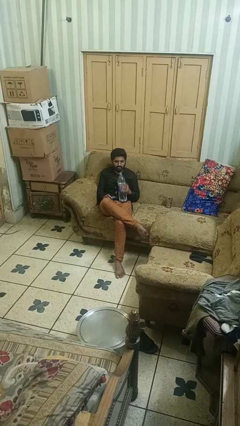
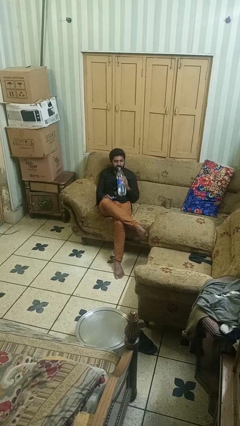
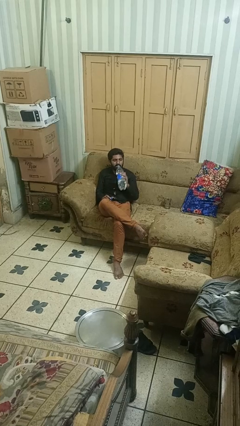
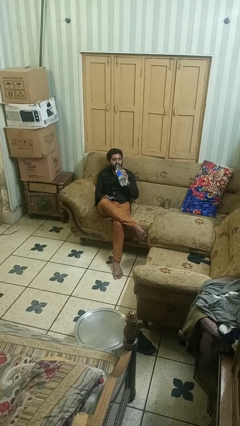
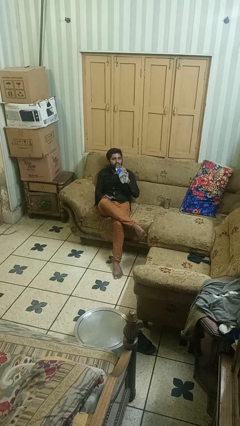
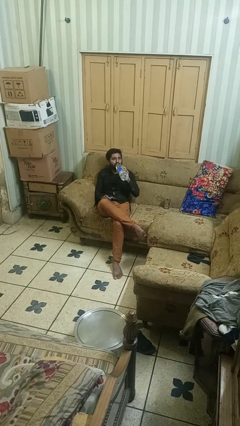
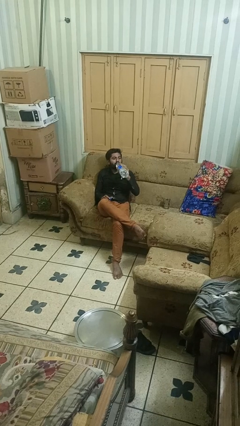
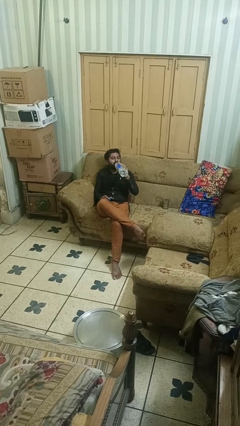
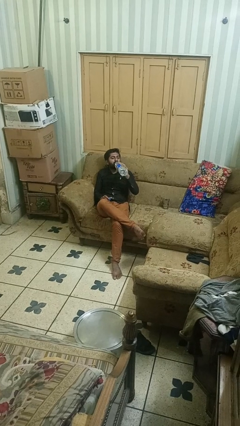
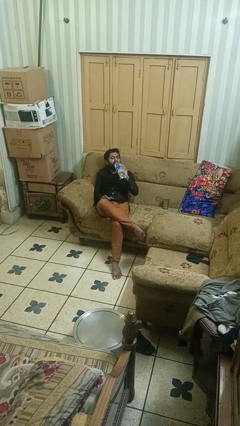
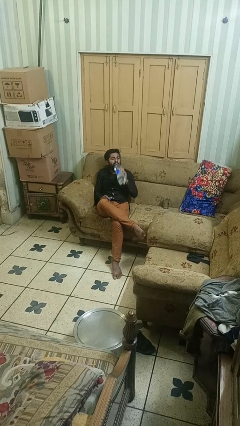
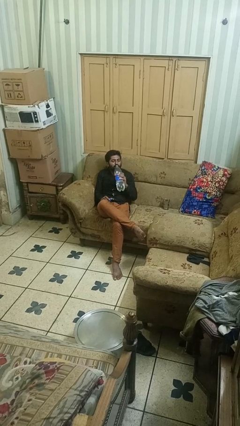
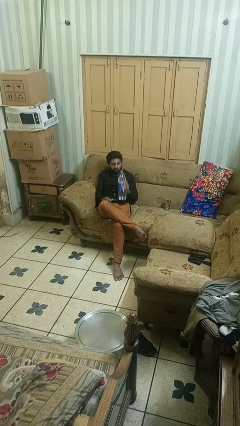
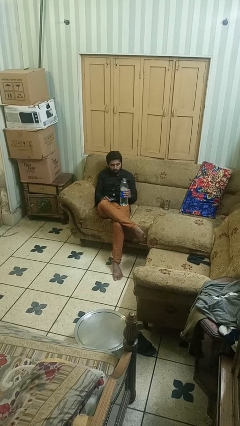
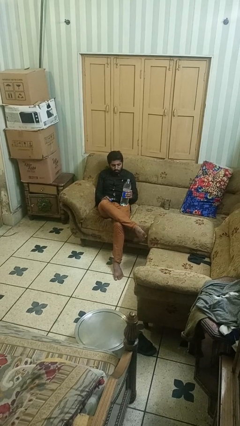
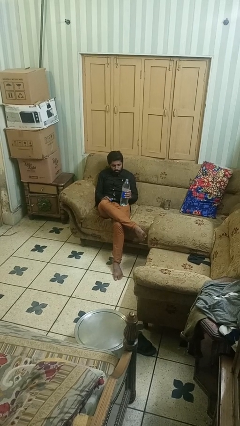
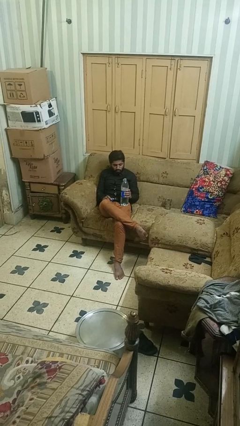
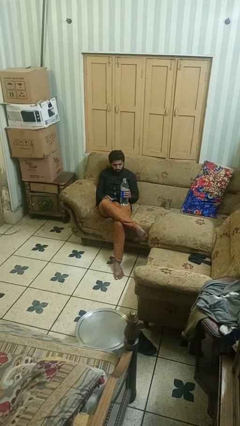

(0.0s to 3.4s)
person drinks from bottle

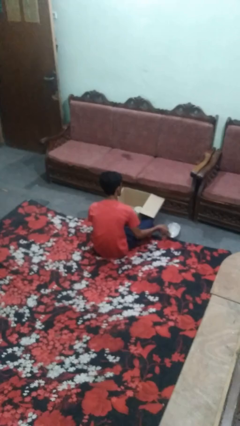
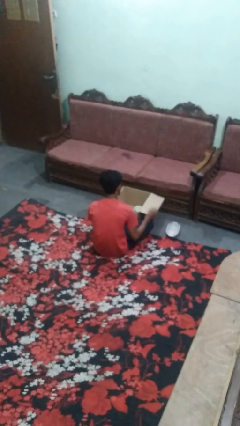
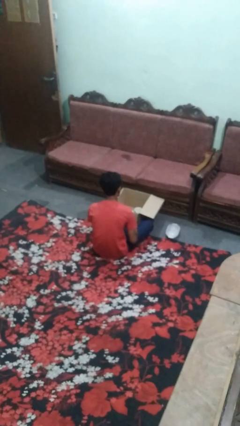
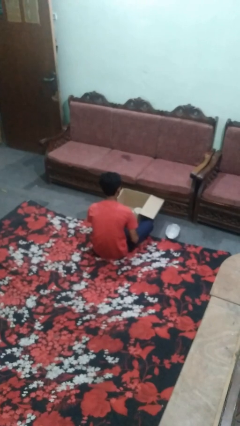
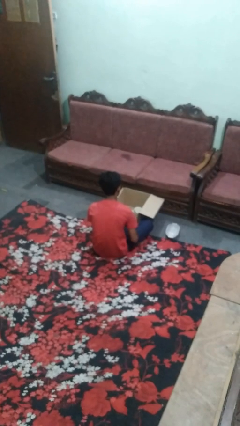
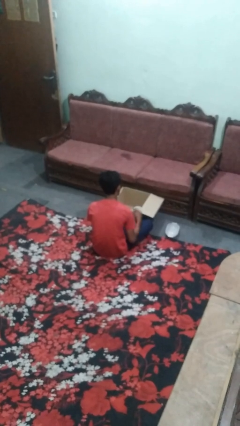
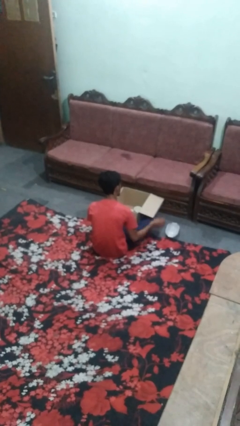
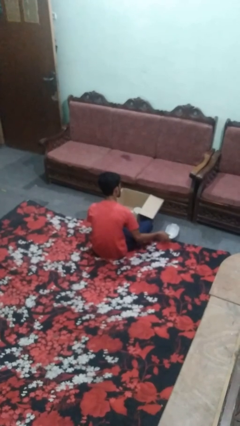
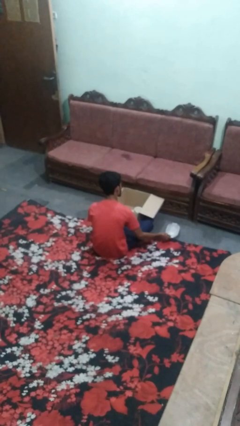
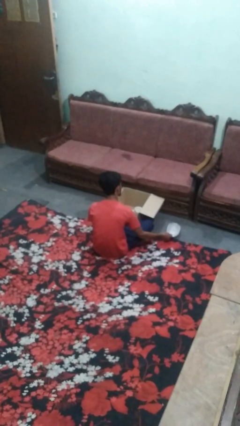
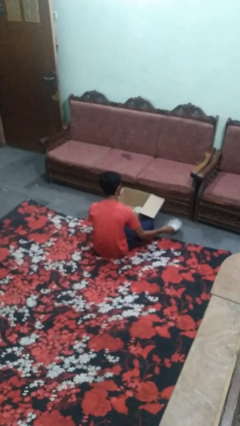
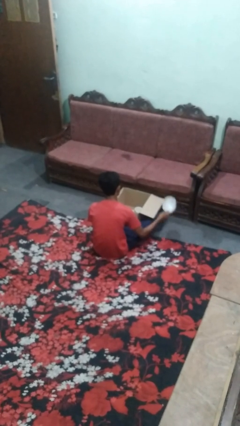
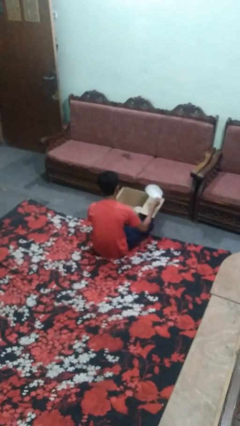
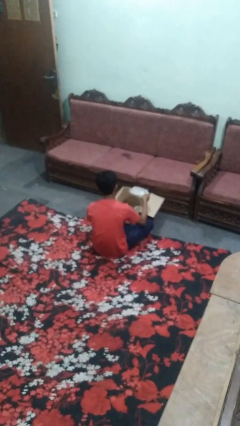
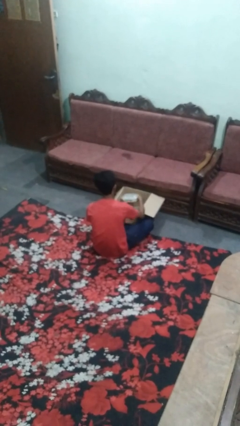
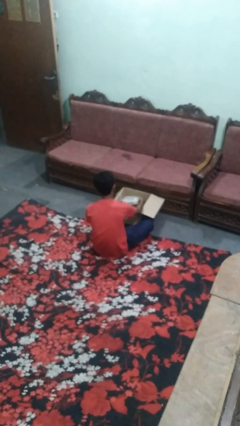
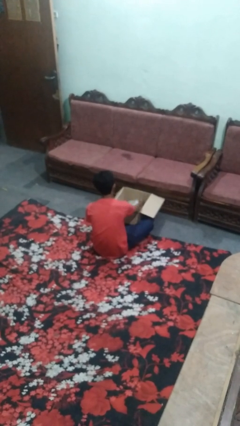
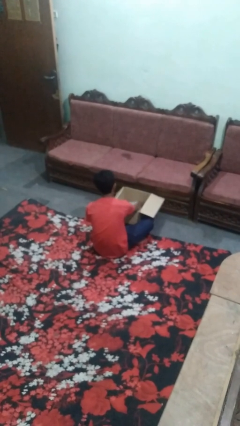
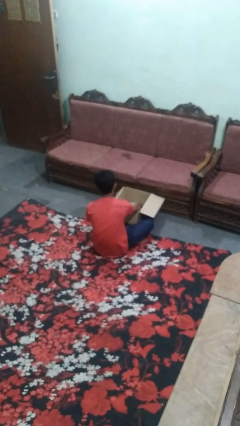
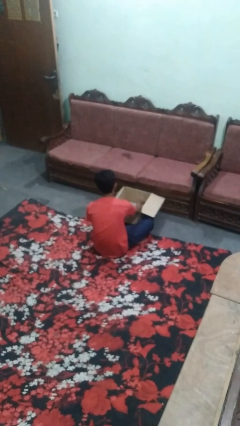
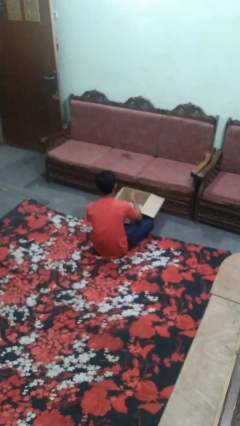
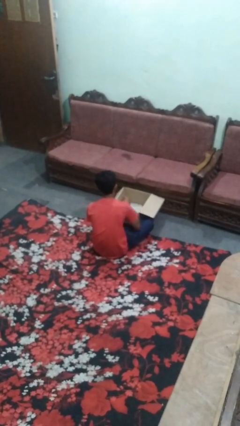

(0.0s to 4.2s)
person puts object into box

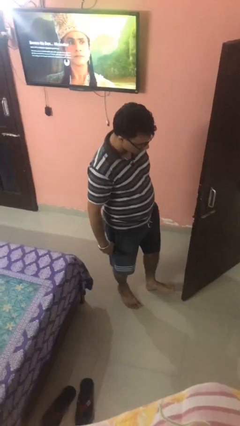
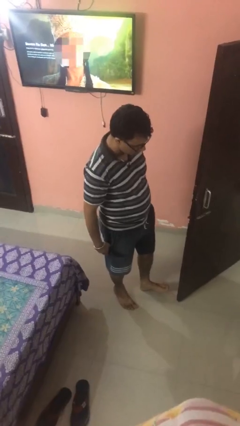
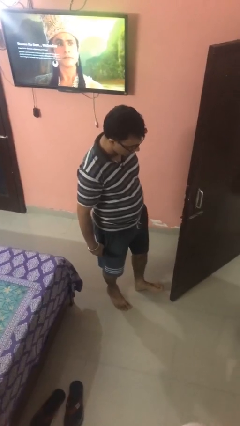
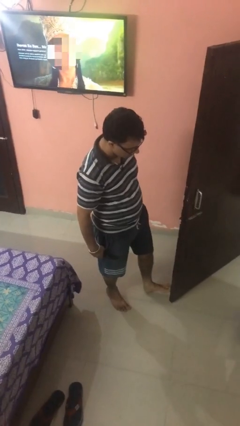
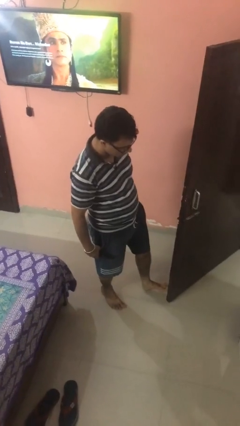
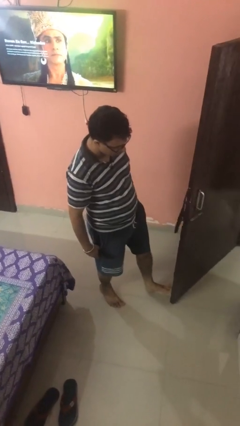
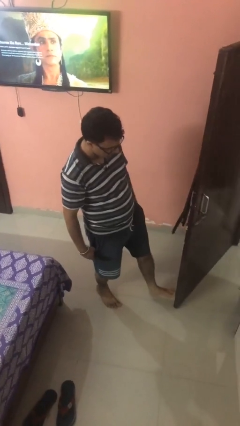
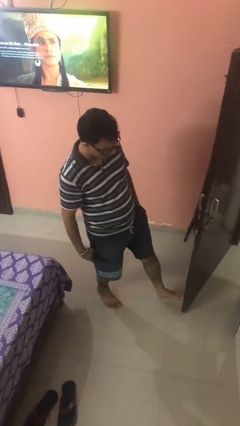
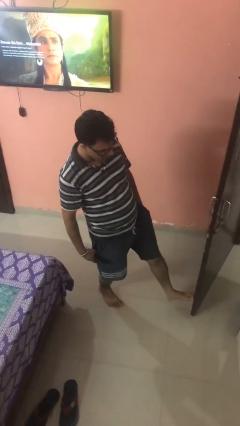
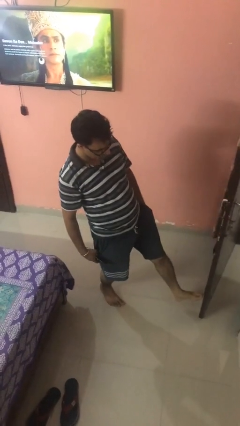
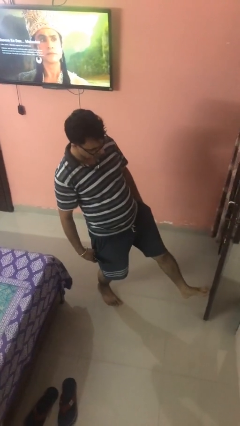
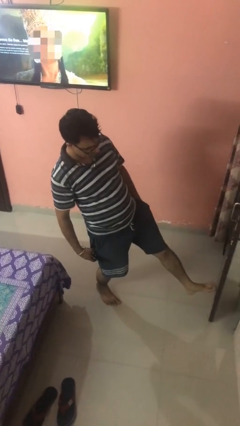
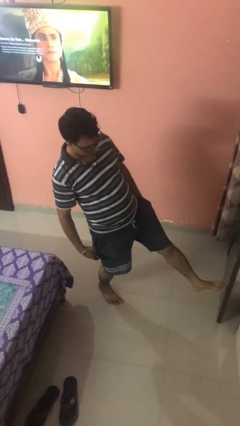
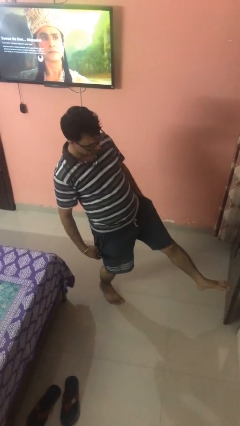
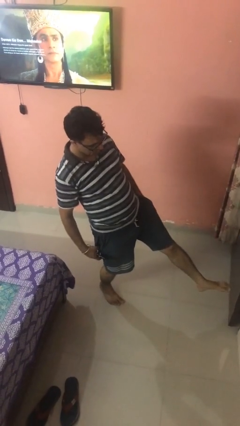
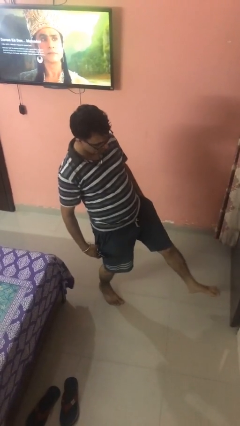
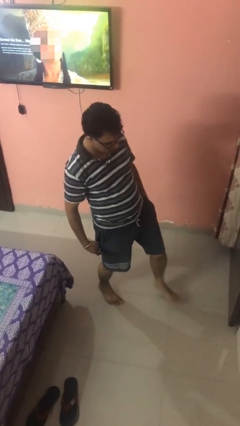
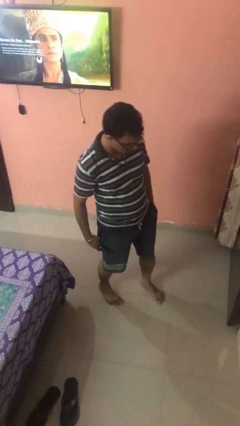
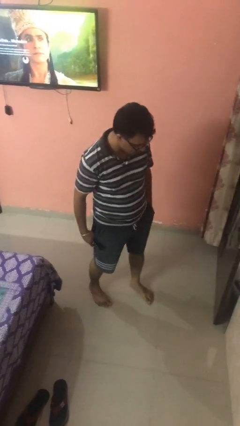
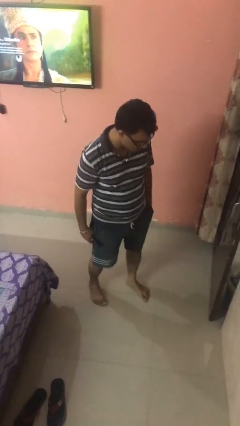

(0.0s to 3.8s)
person closes door with foot

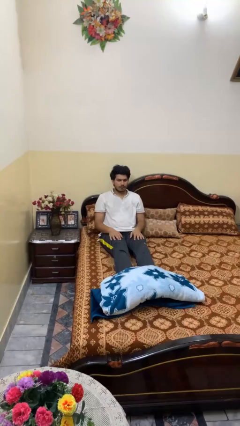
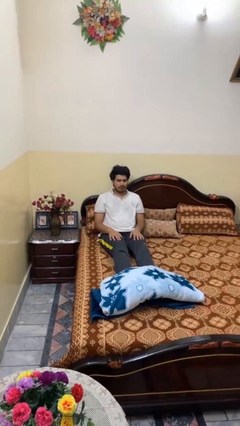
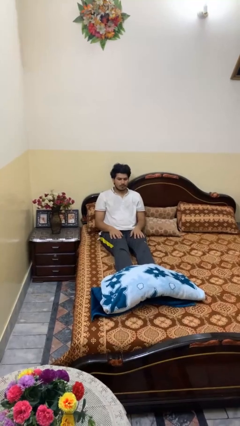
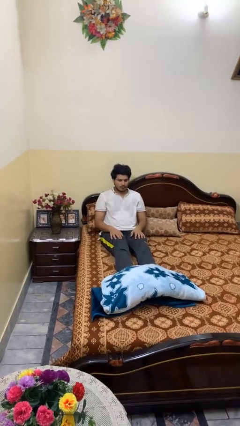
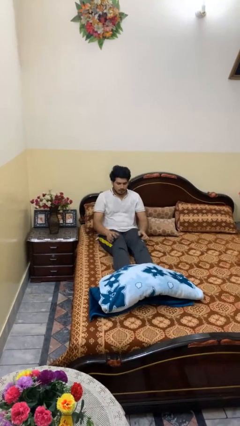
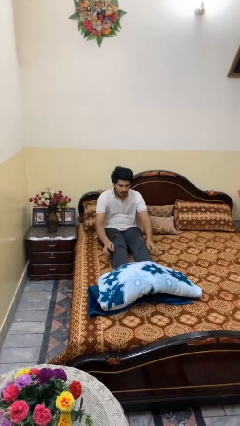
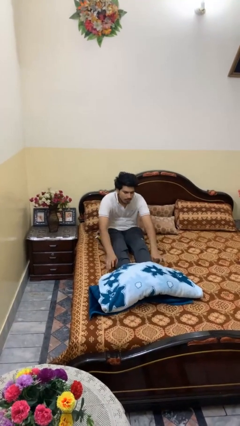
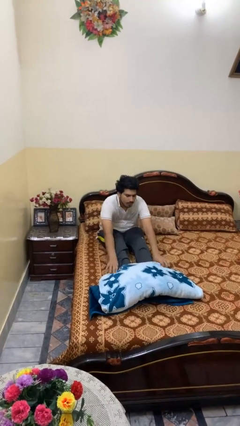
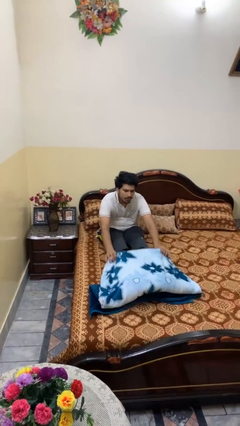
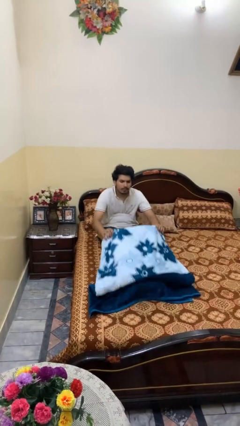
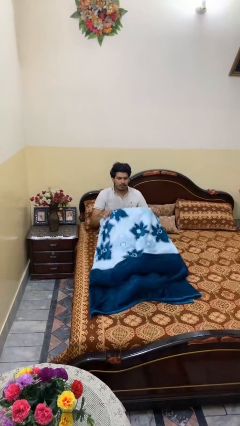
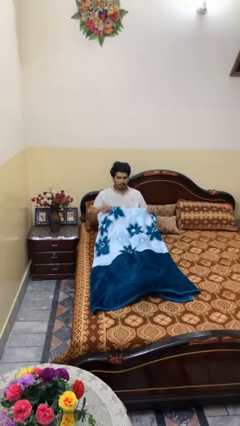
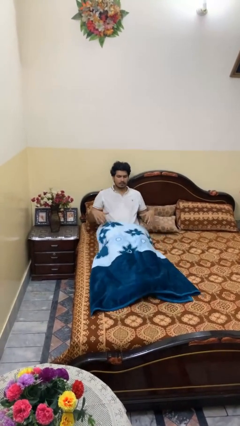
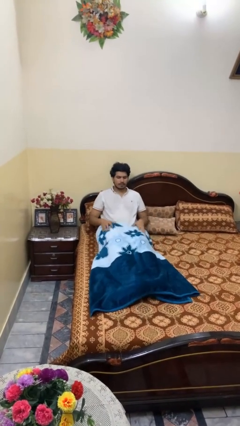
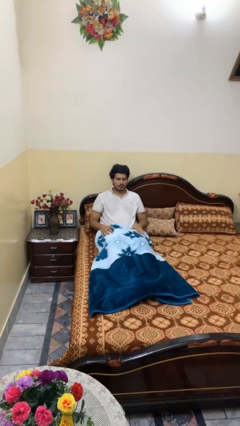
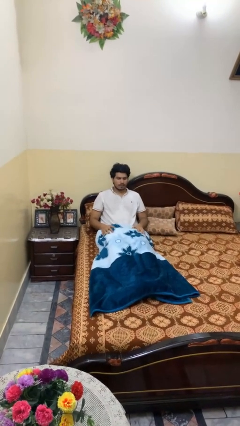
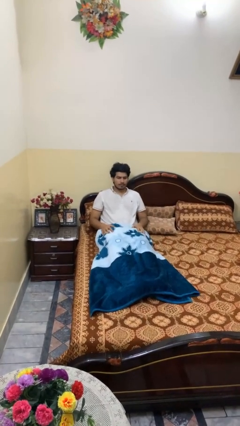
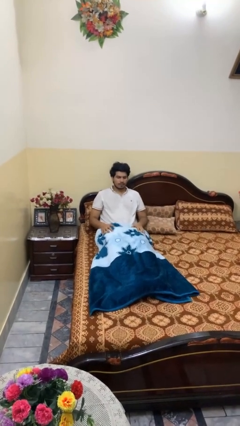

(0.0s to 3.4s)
person covers with blanket

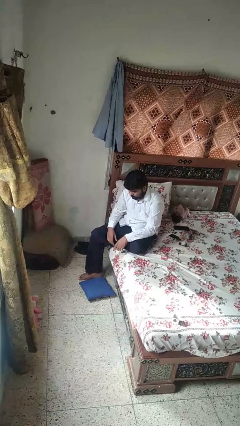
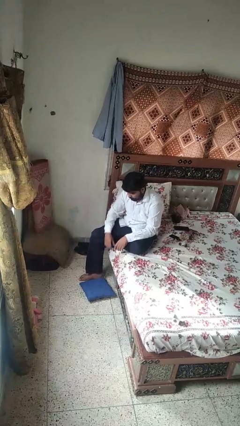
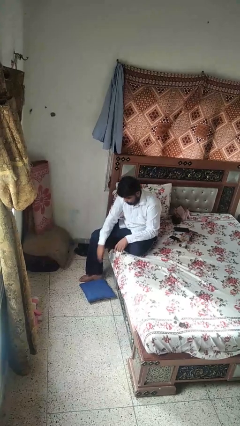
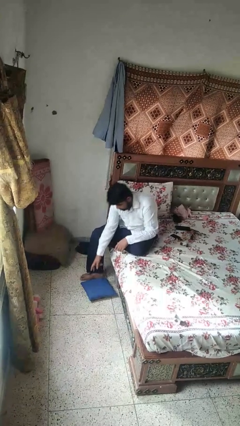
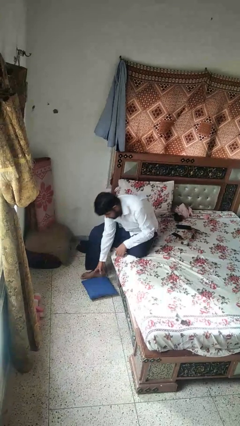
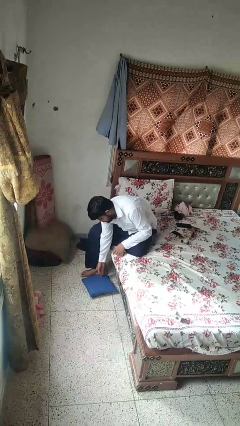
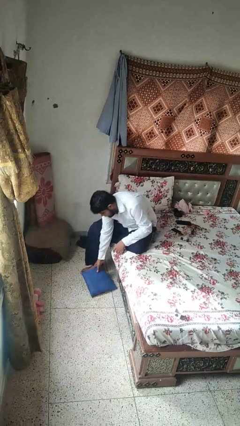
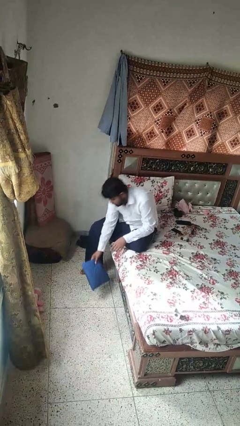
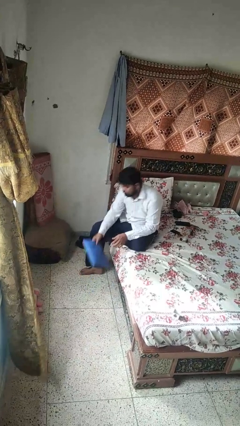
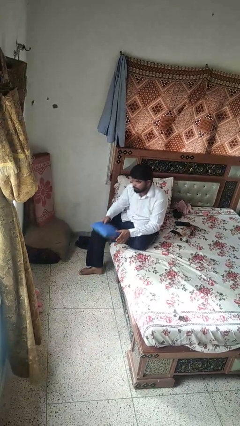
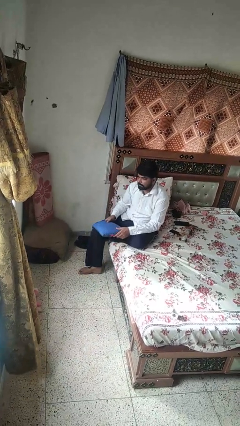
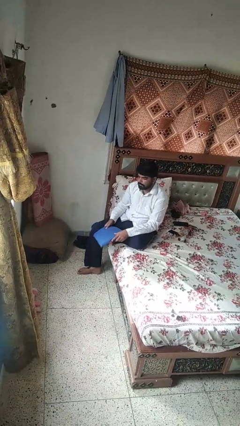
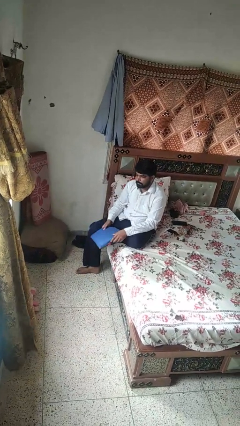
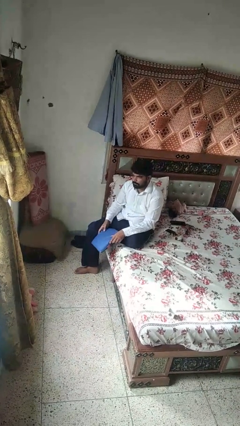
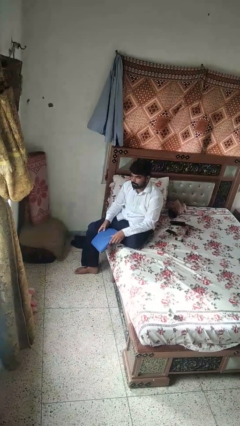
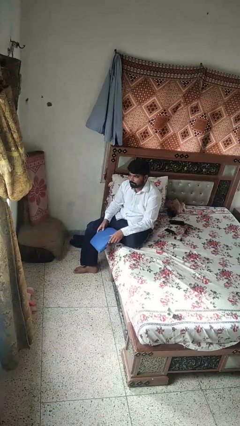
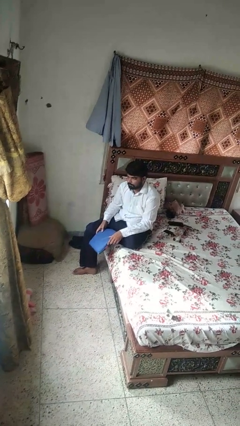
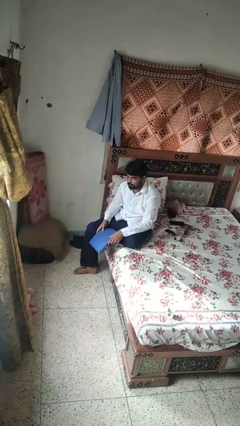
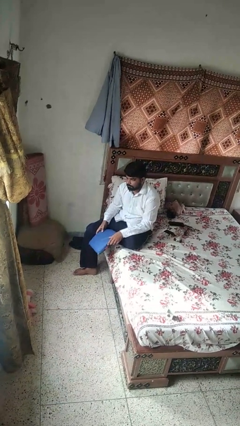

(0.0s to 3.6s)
person picks up object from floor
